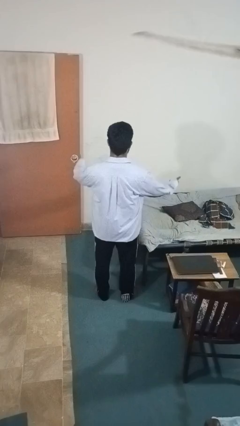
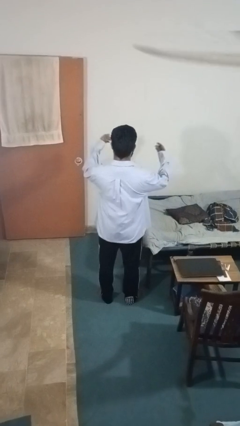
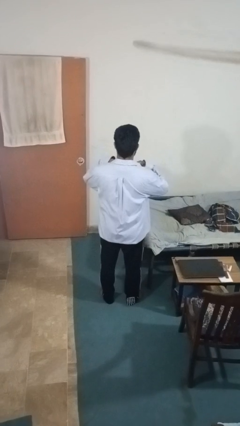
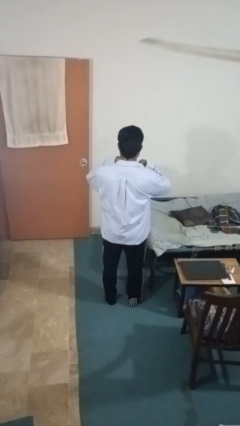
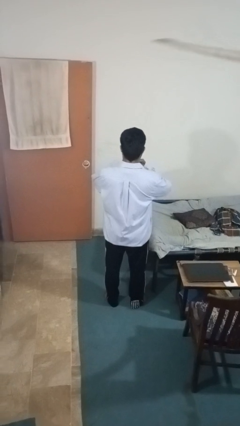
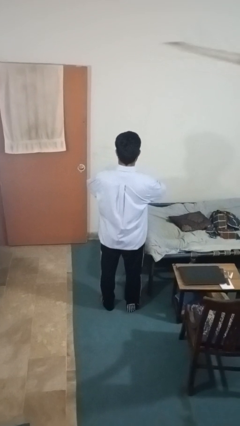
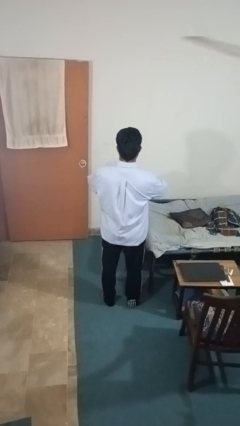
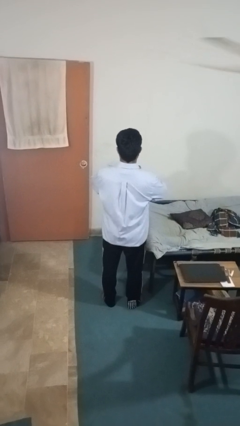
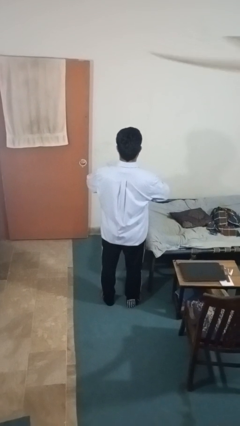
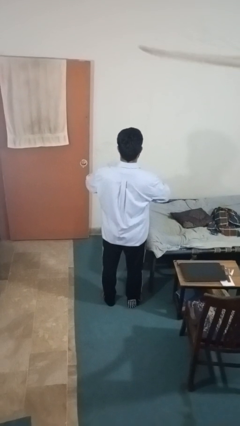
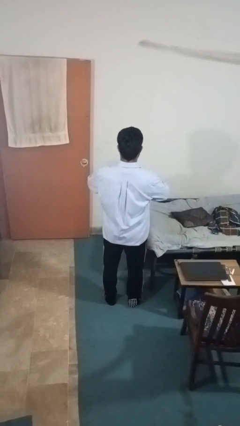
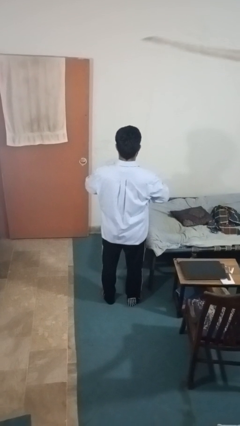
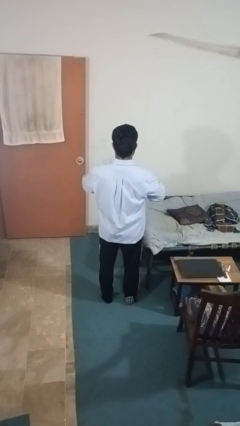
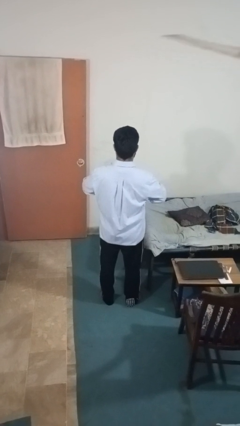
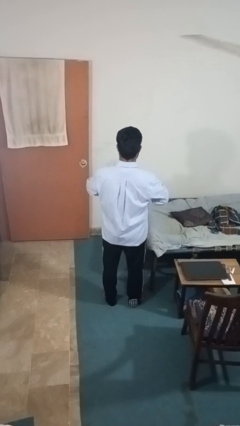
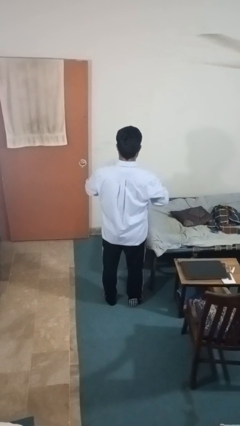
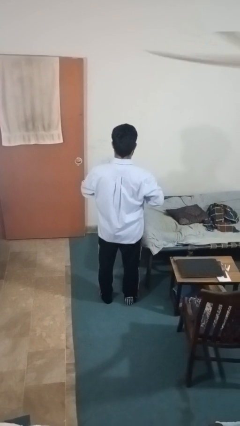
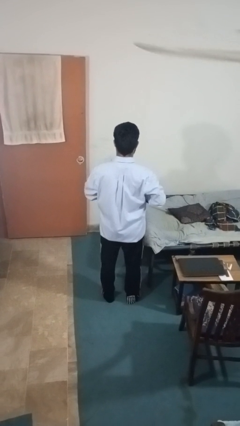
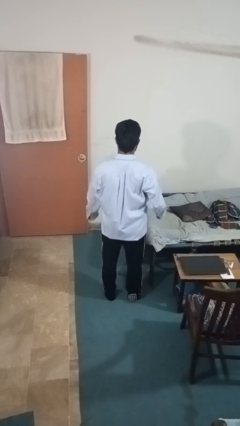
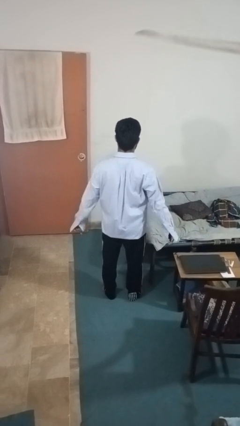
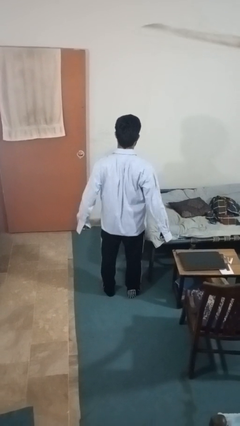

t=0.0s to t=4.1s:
person unbuttons shirt

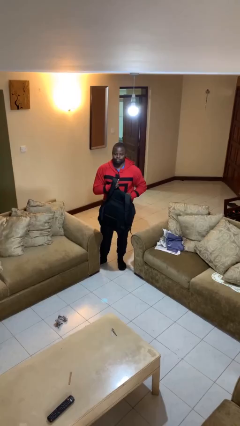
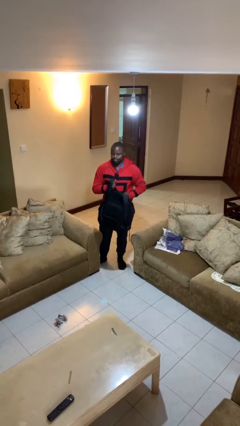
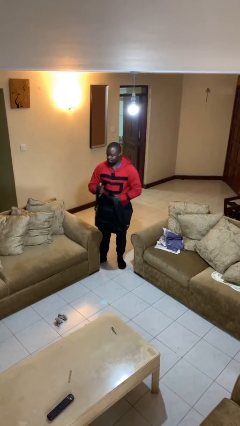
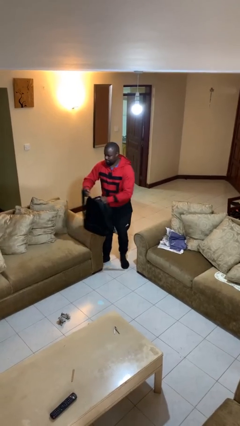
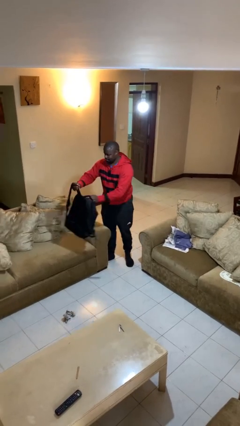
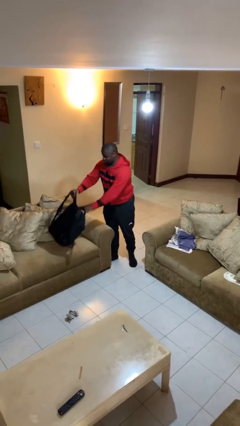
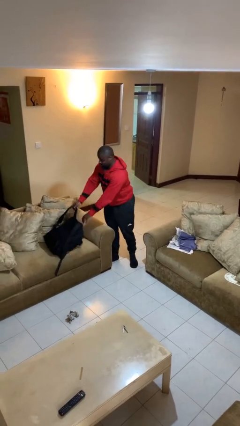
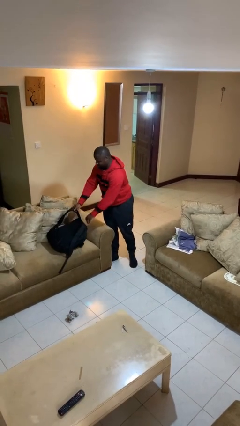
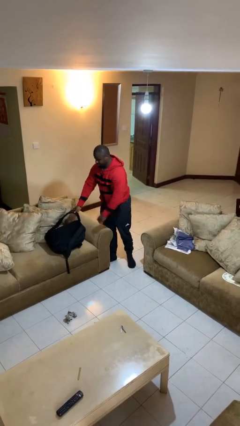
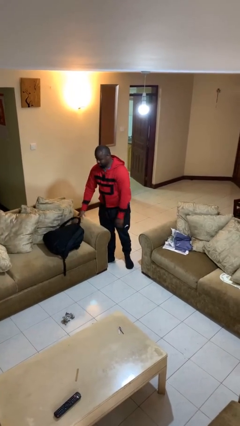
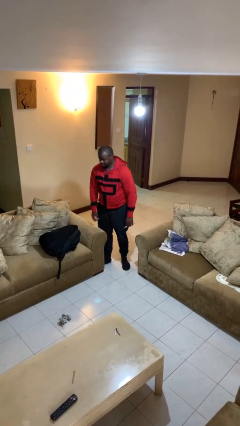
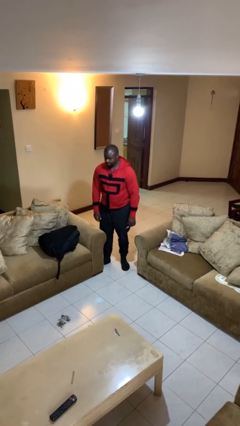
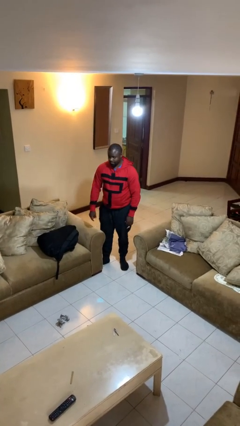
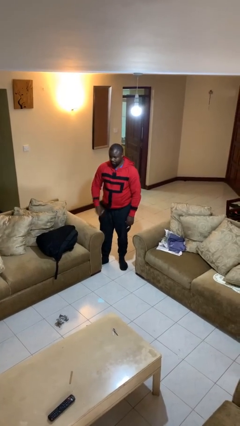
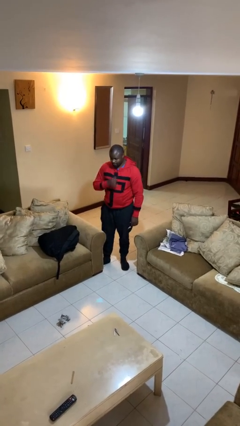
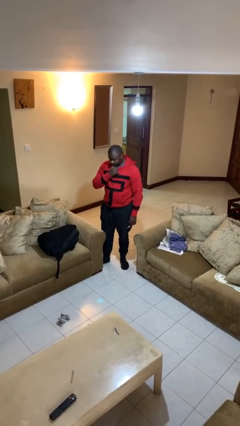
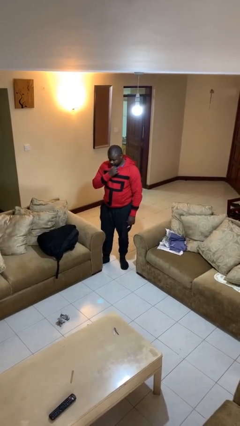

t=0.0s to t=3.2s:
person puts down object on couch

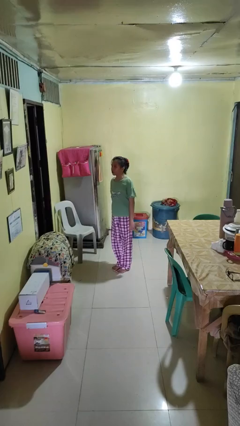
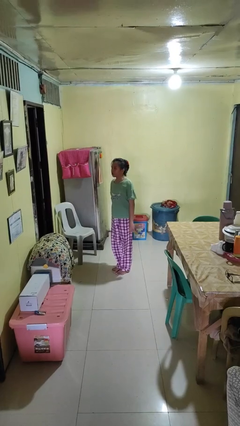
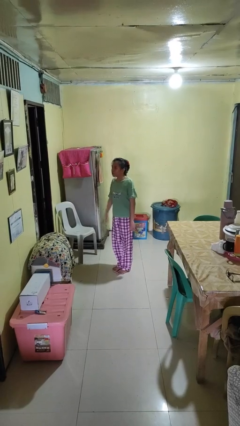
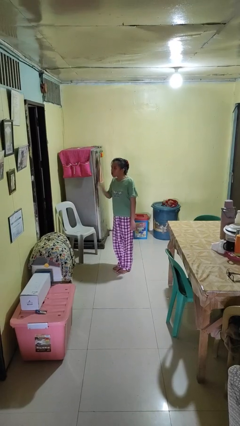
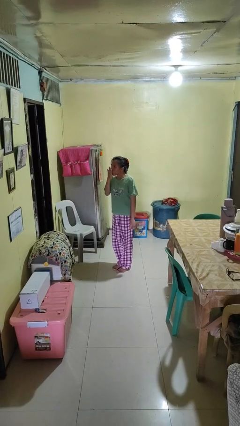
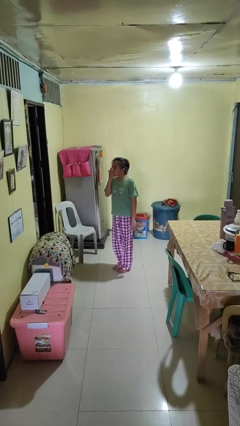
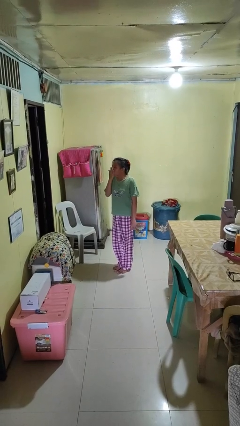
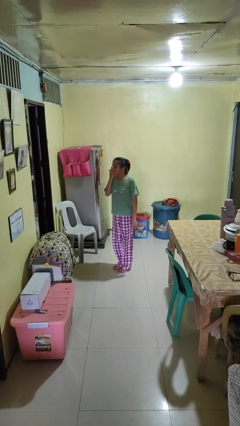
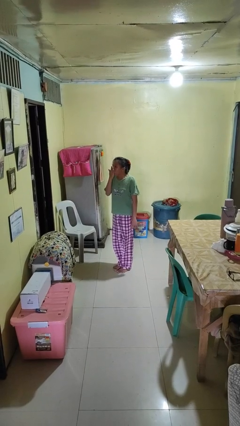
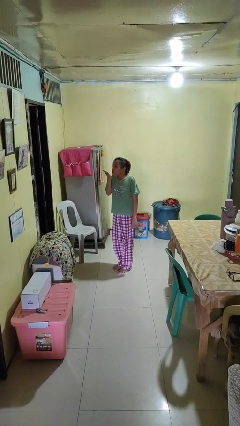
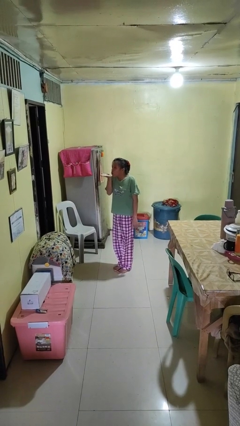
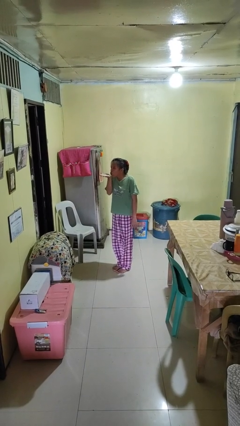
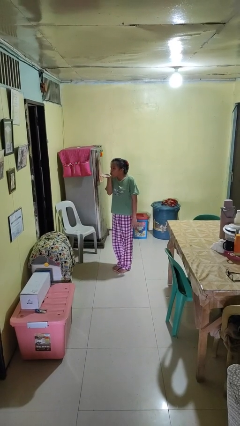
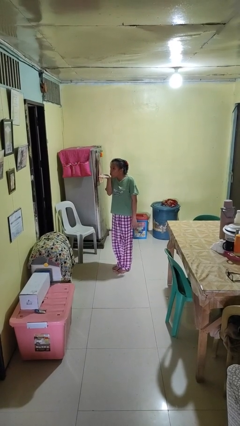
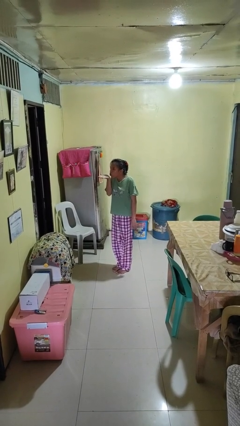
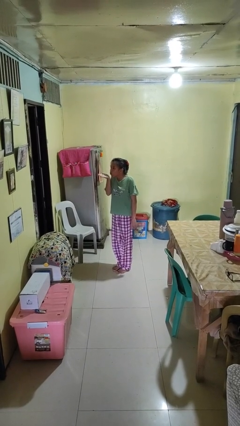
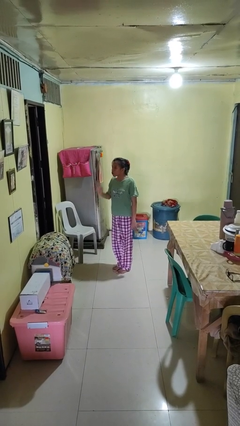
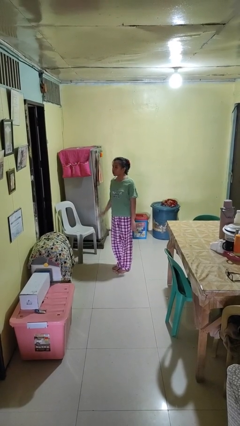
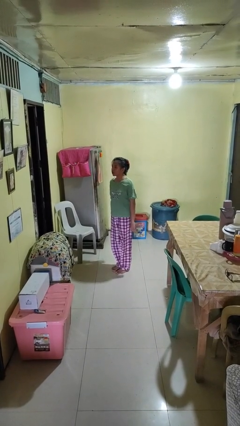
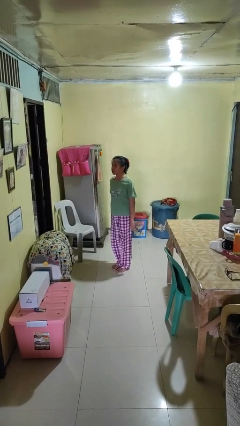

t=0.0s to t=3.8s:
person gestures blow kiss

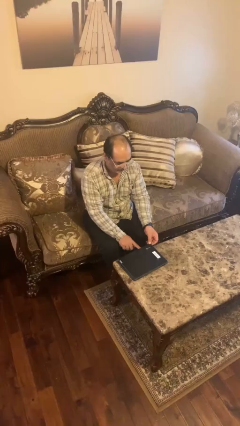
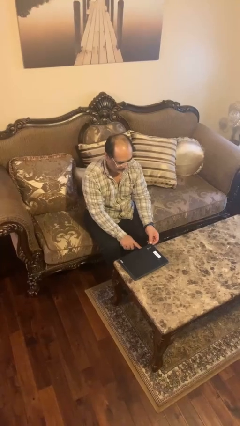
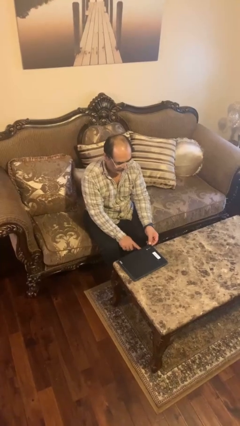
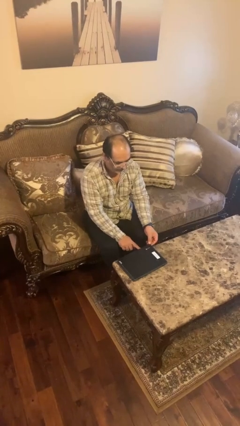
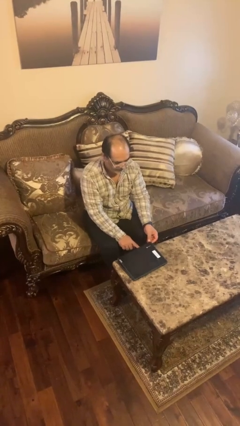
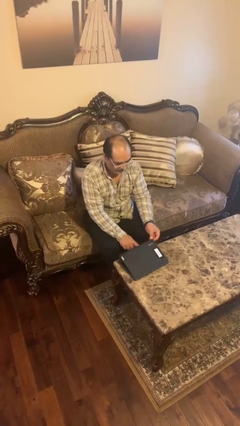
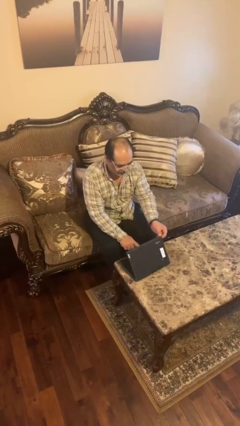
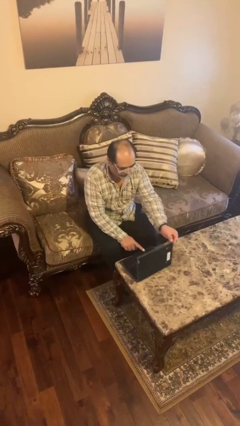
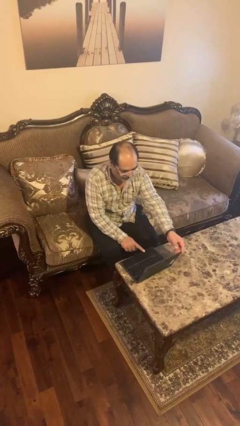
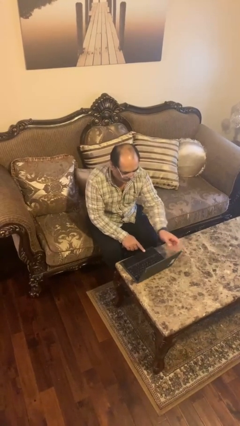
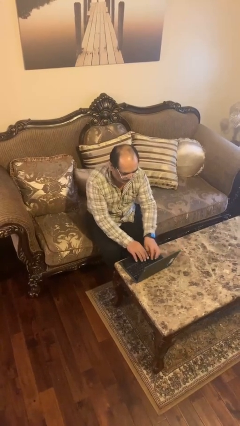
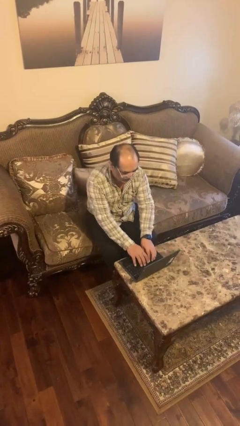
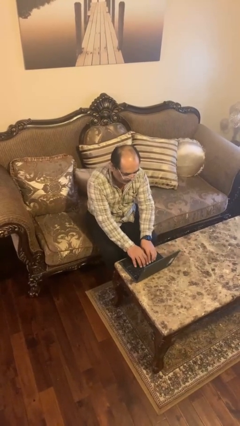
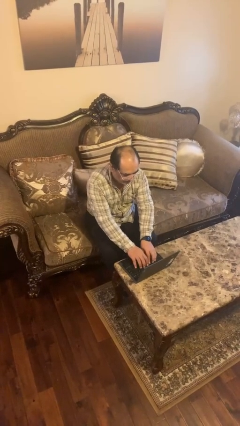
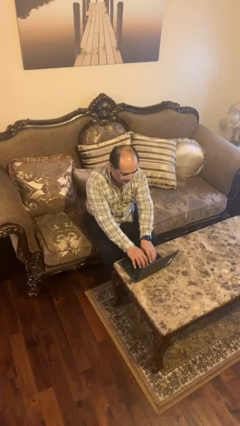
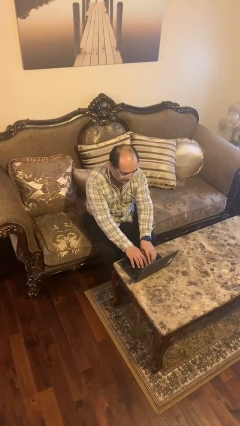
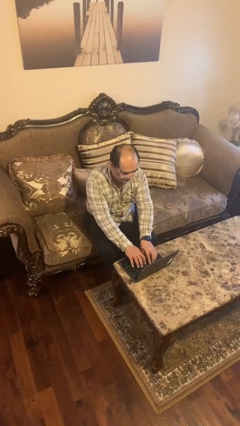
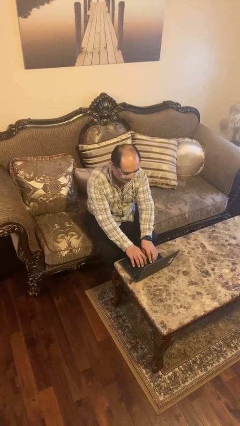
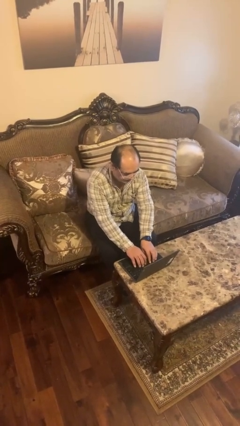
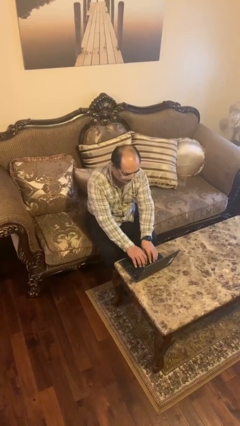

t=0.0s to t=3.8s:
person interacts with laptop

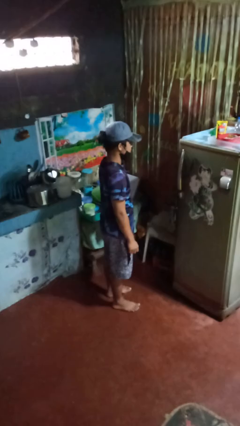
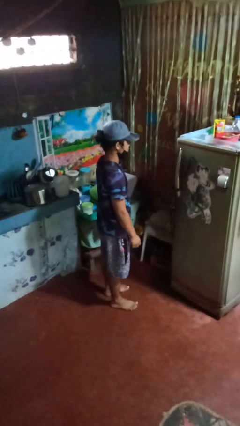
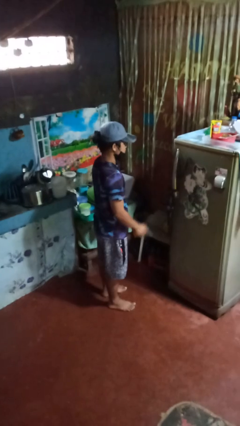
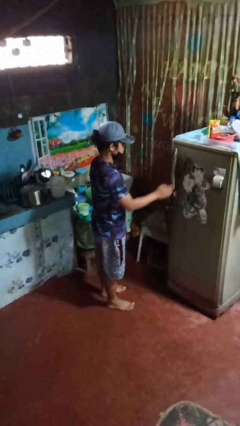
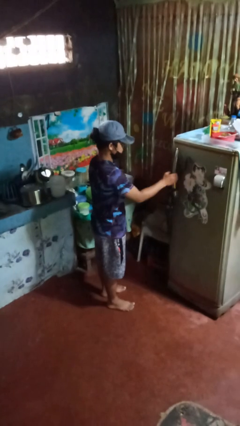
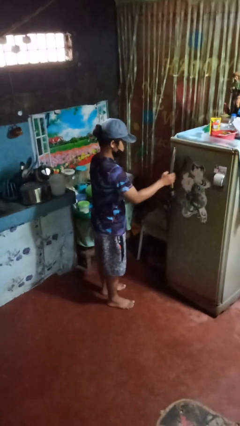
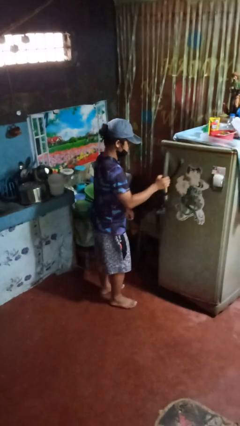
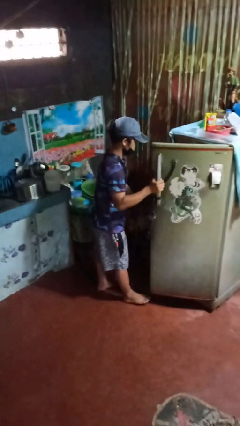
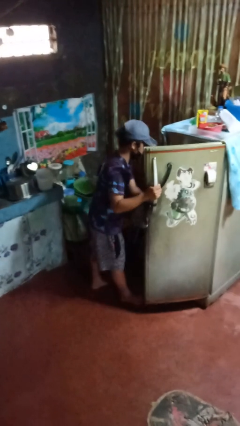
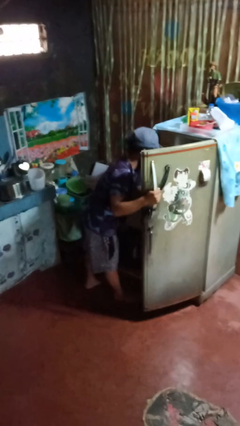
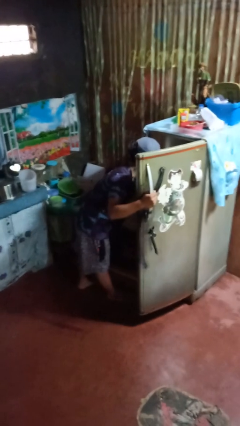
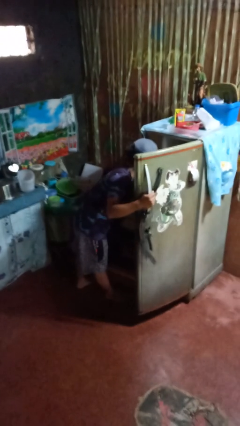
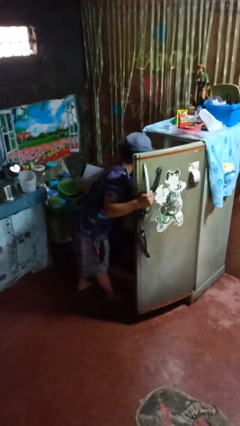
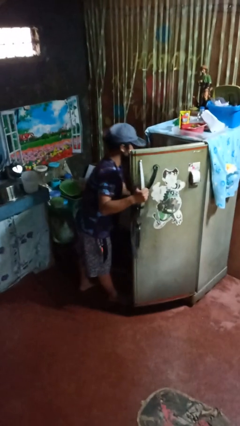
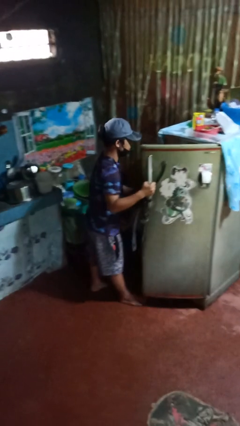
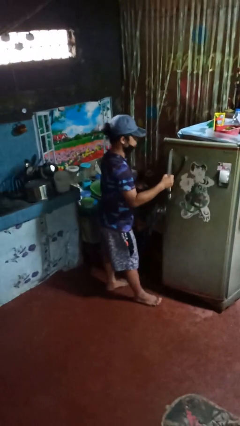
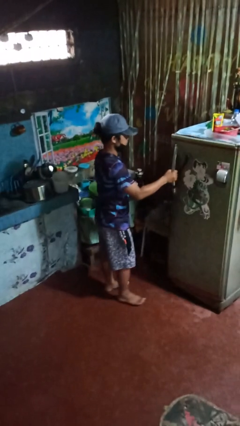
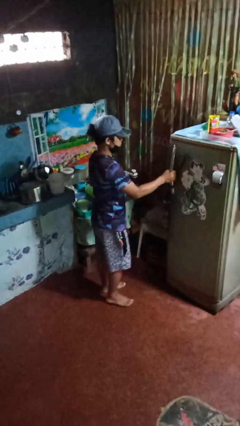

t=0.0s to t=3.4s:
person takes object from refrigerator
